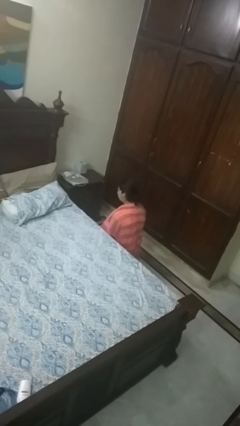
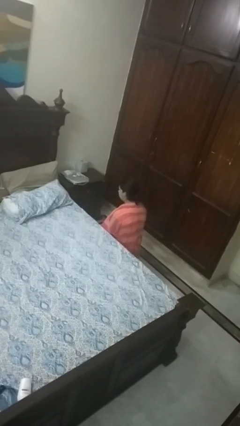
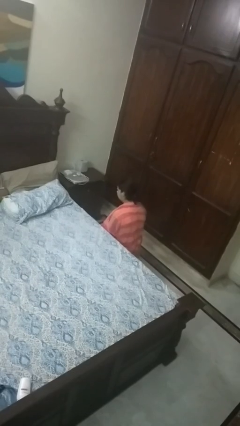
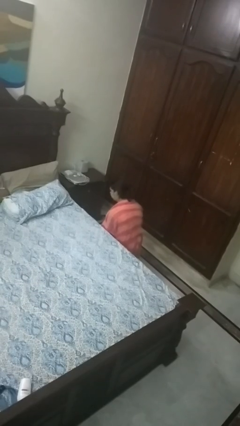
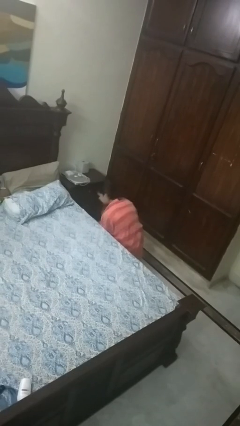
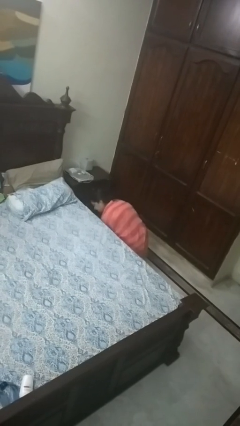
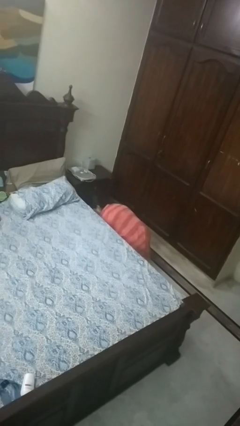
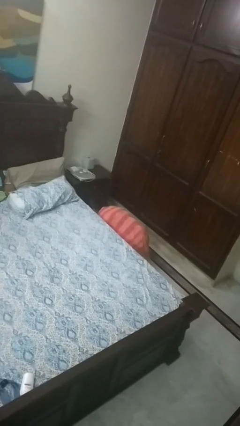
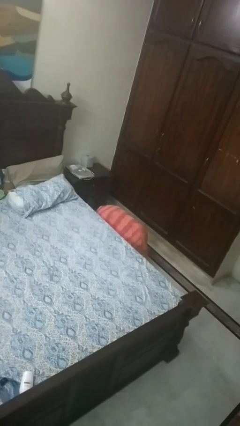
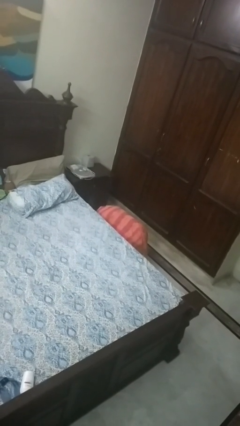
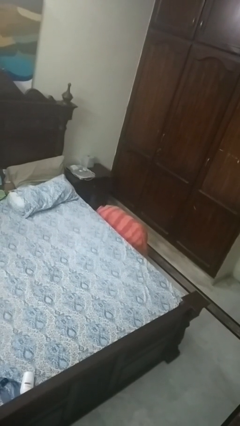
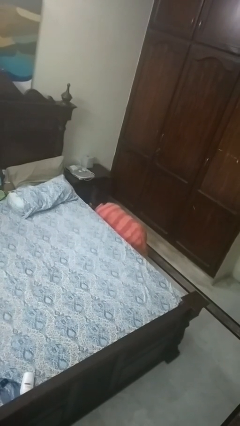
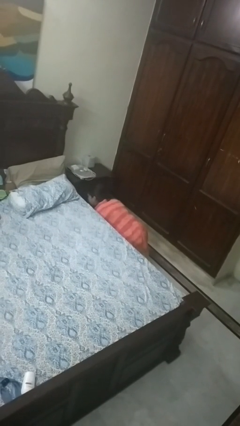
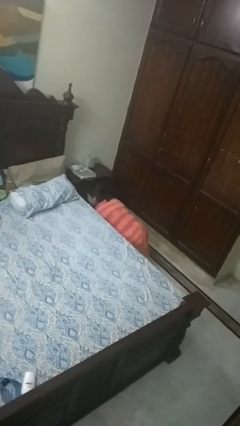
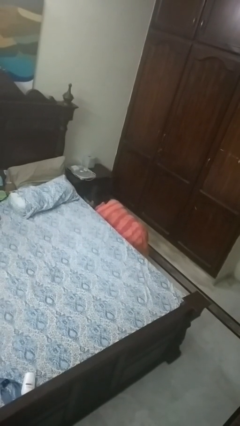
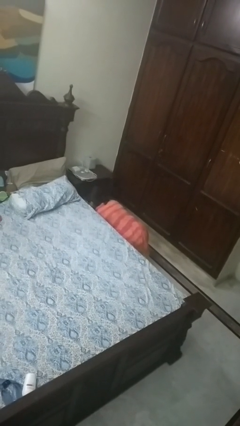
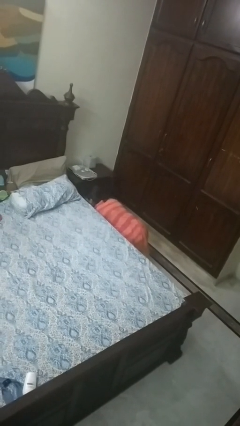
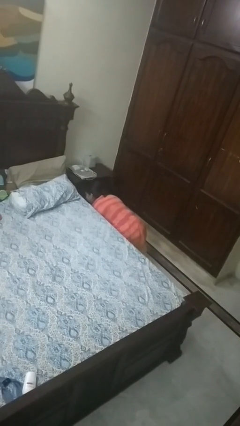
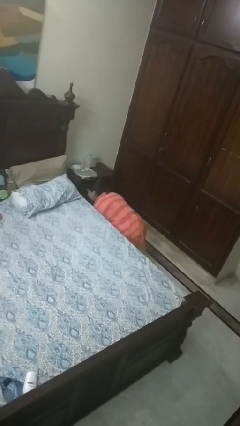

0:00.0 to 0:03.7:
person searches under bed

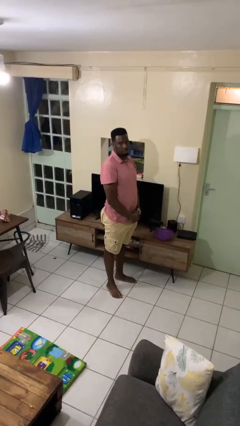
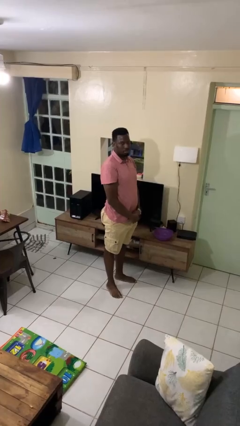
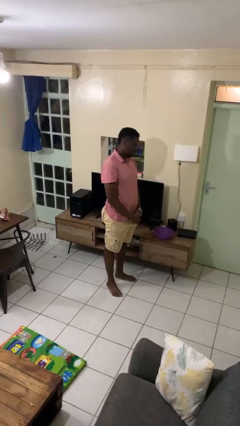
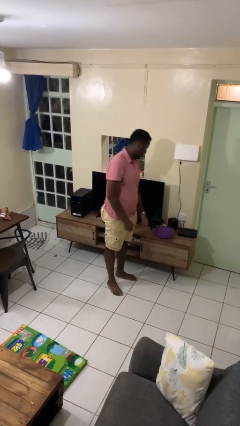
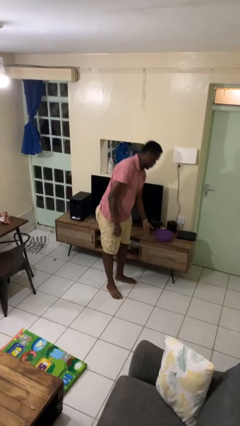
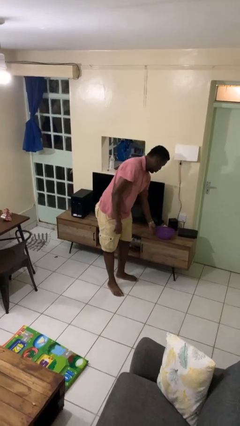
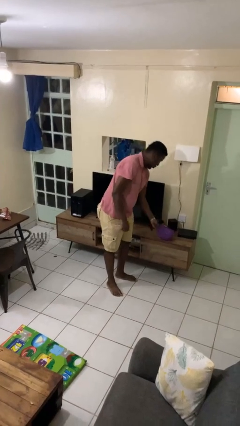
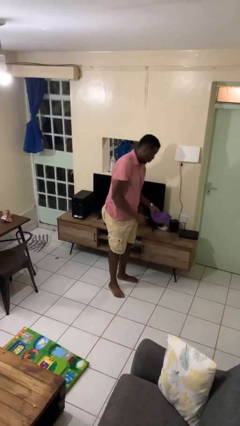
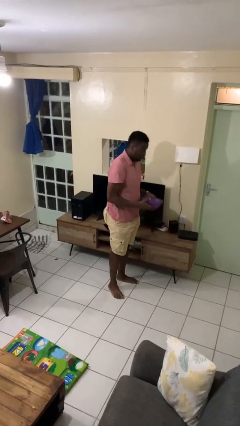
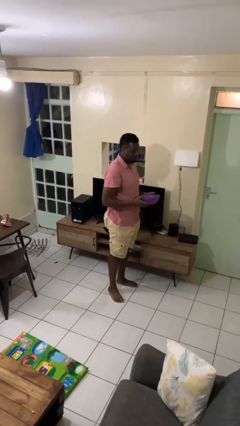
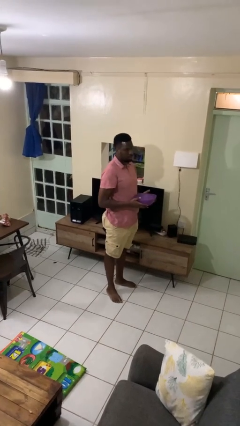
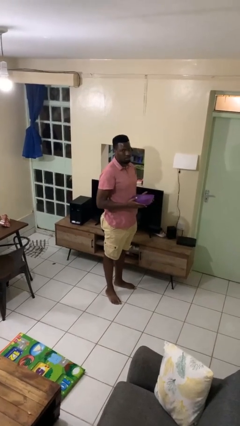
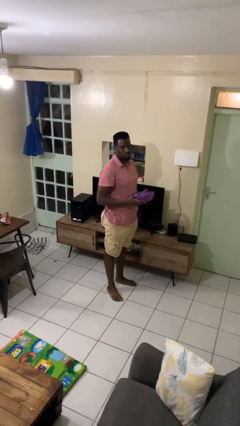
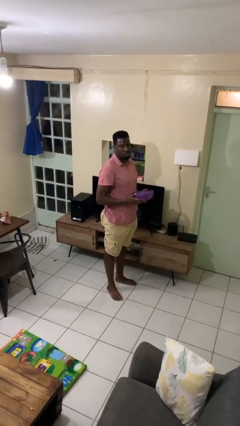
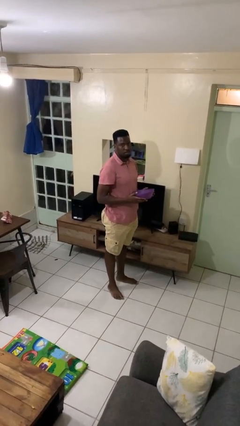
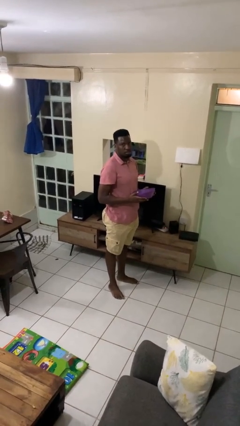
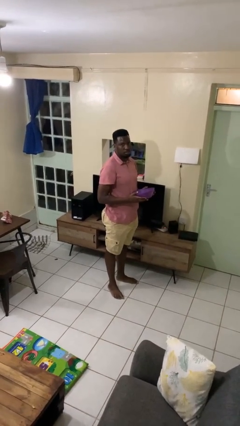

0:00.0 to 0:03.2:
person picks up object from countertop

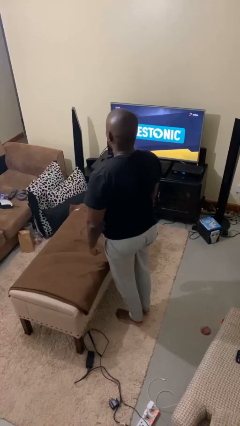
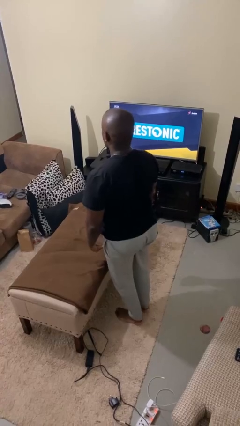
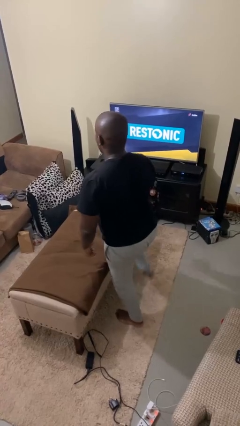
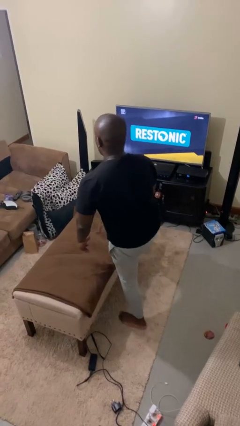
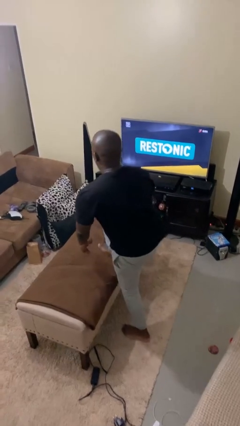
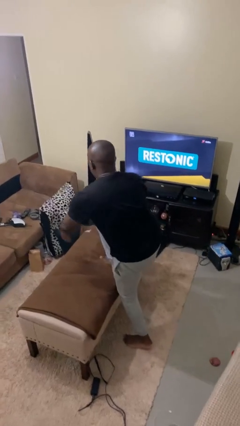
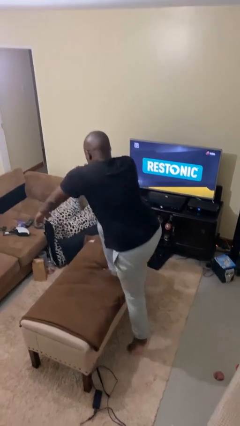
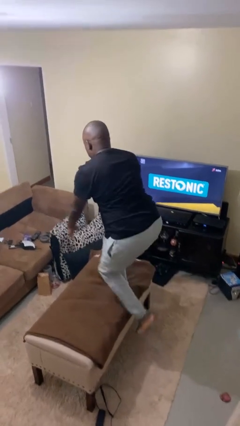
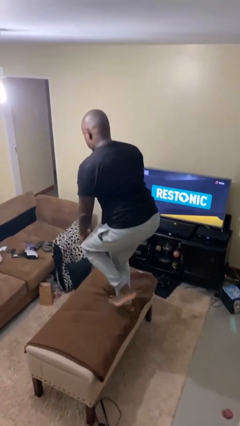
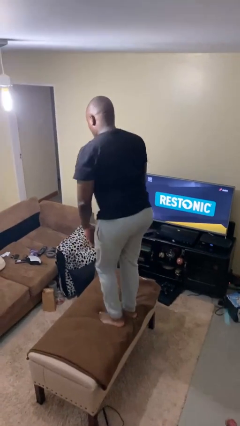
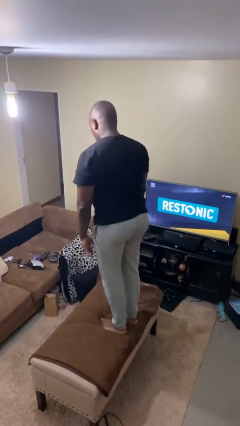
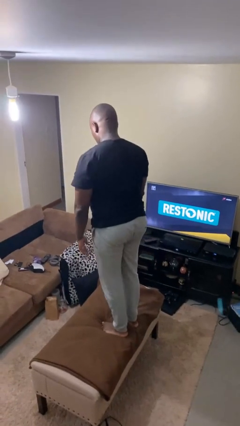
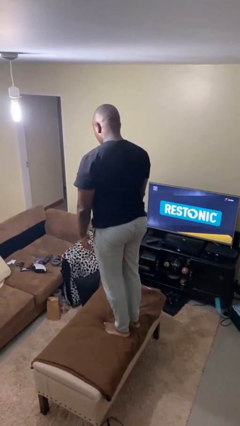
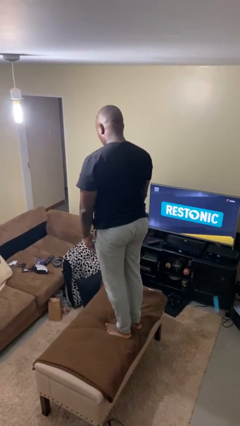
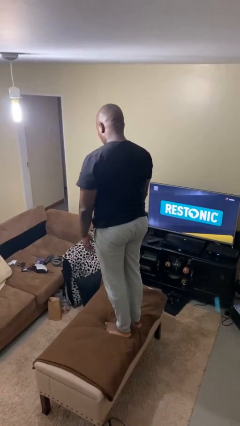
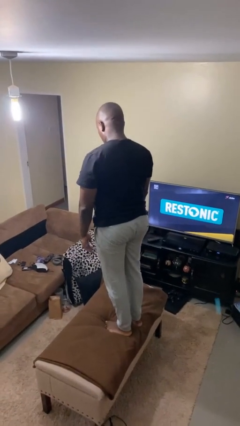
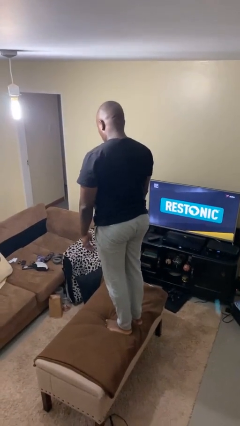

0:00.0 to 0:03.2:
person climbs on table

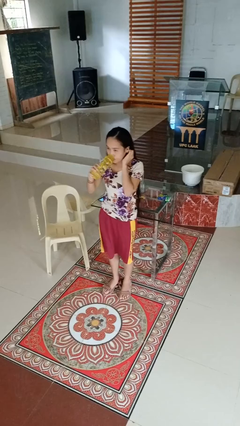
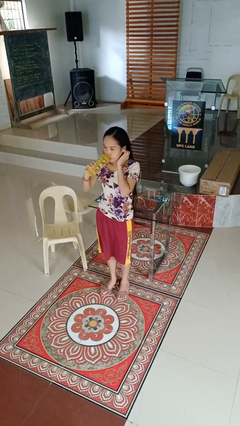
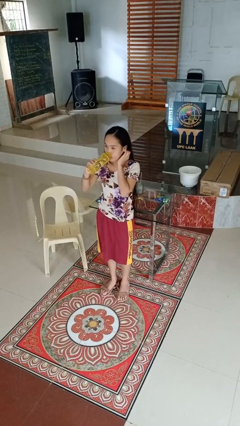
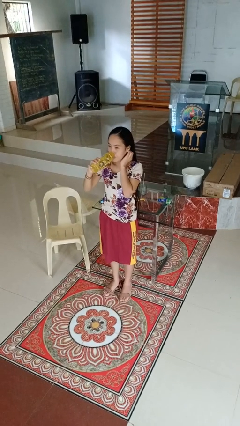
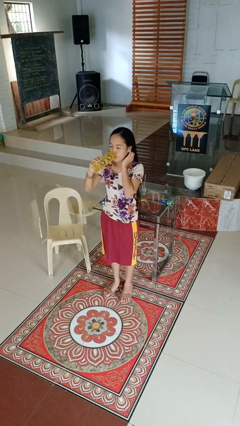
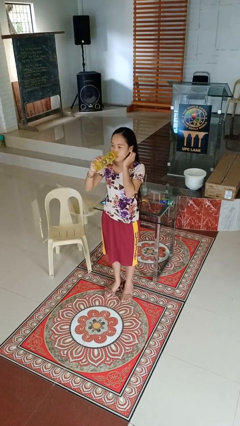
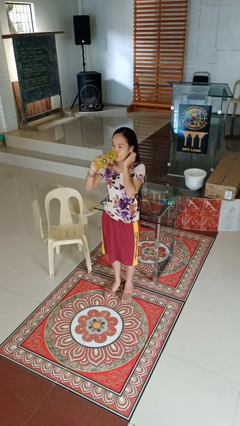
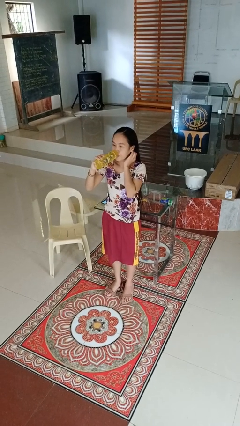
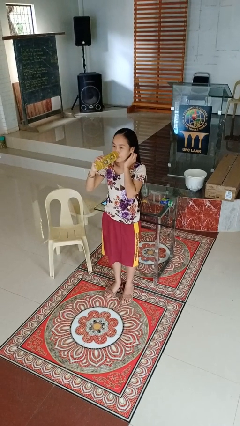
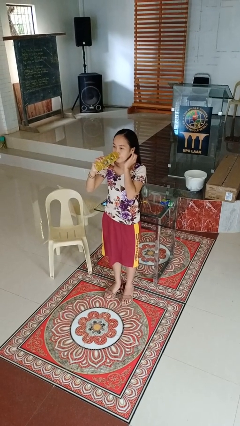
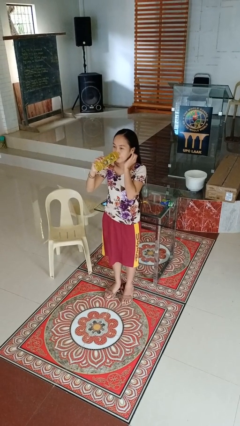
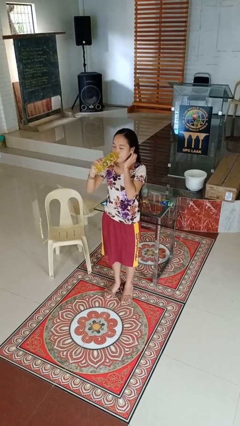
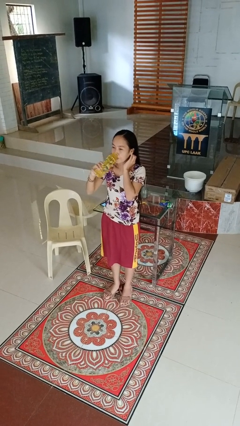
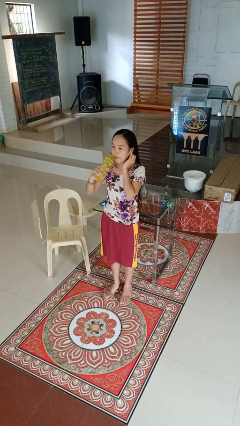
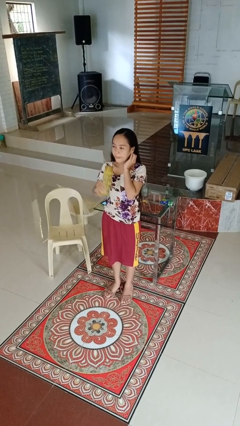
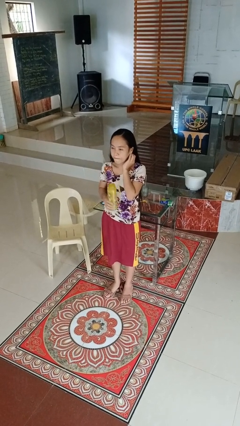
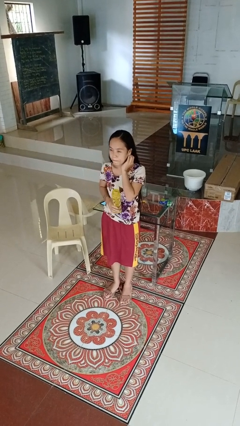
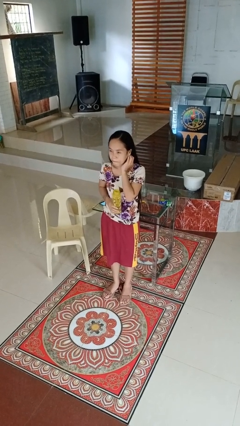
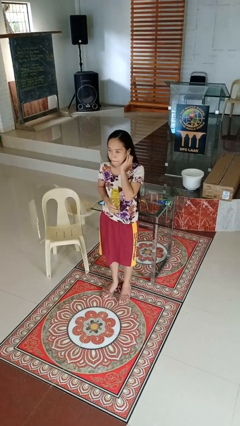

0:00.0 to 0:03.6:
person drinks from bottle

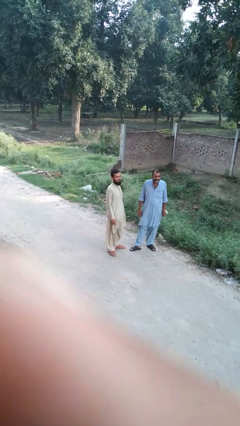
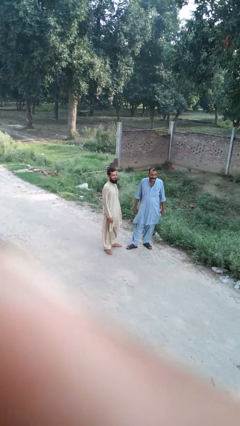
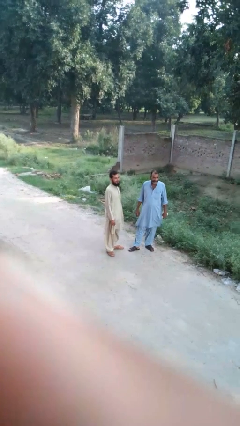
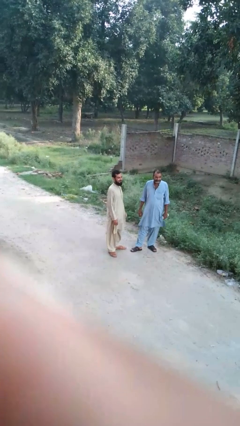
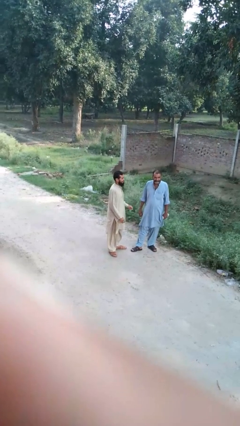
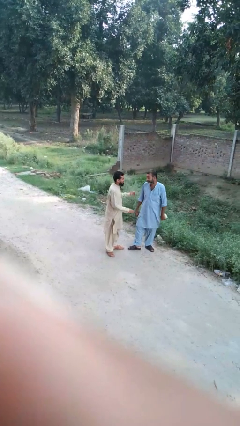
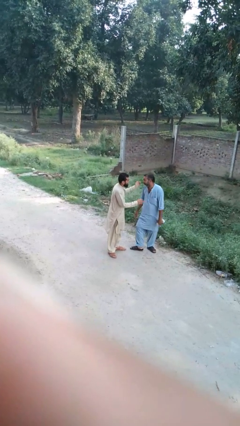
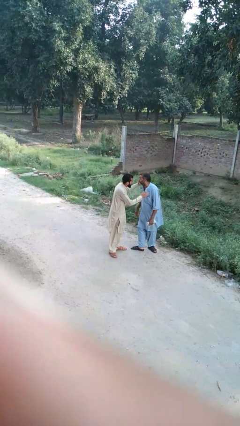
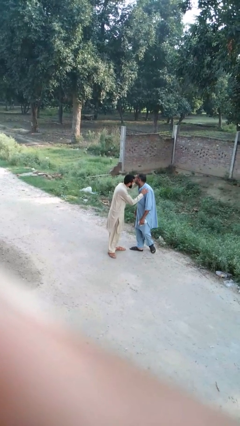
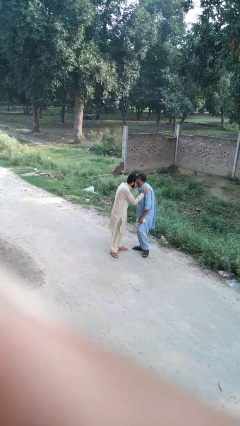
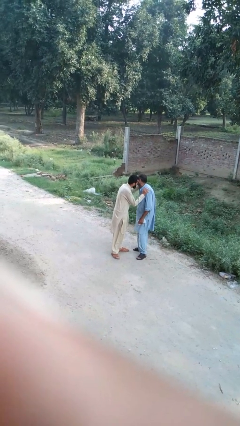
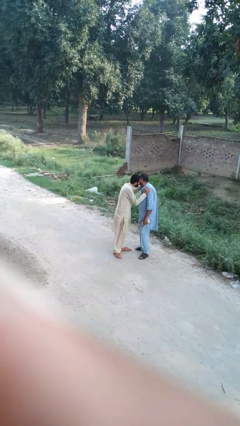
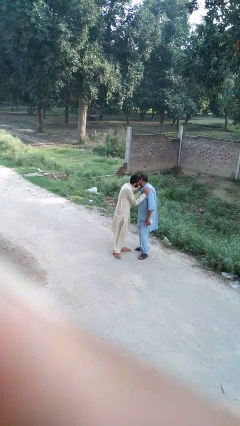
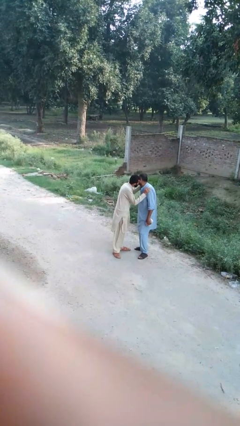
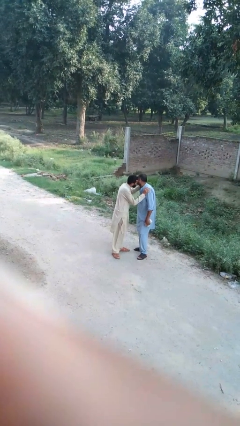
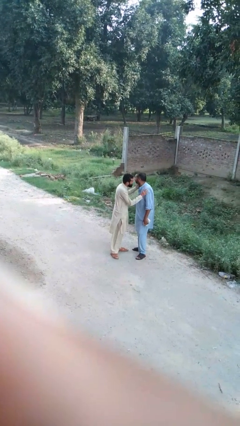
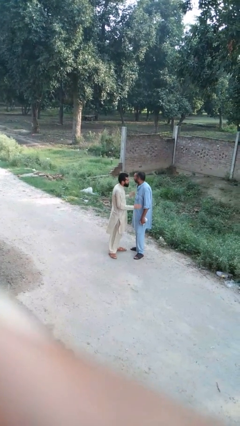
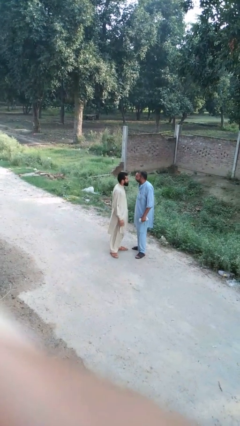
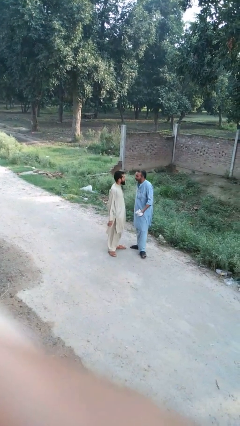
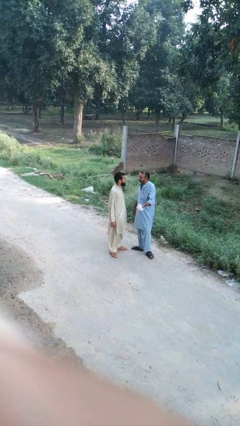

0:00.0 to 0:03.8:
person kisses cheek of person
